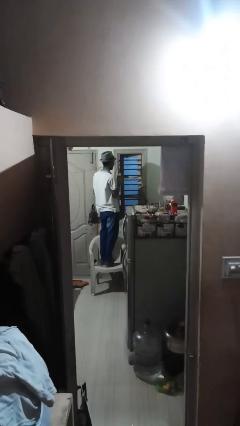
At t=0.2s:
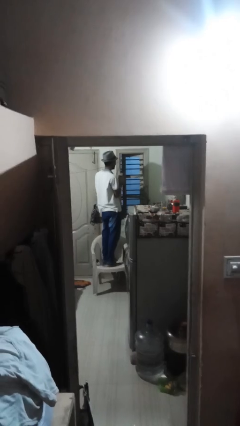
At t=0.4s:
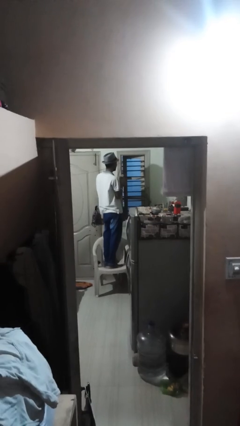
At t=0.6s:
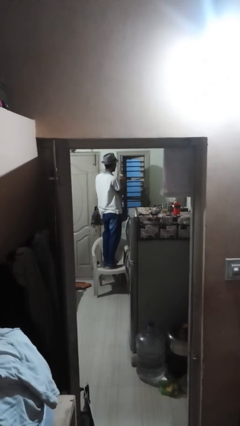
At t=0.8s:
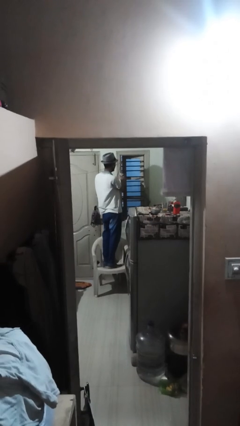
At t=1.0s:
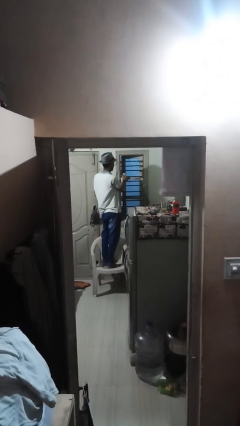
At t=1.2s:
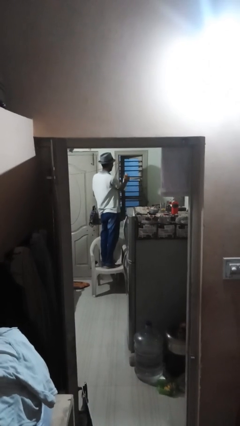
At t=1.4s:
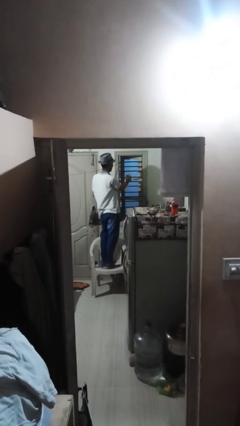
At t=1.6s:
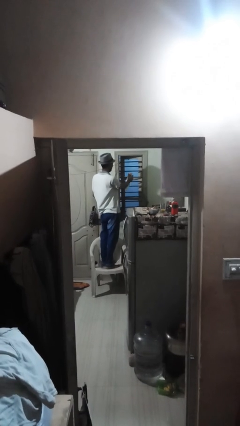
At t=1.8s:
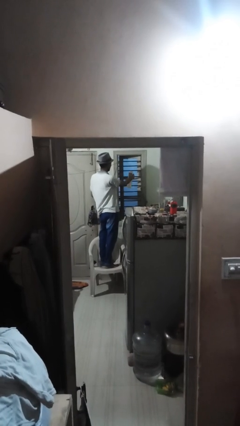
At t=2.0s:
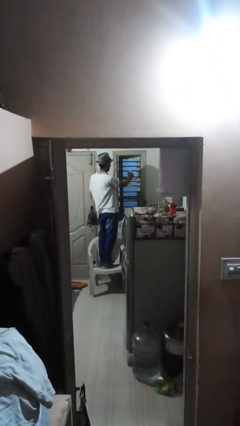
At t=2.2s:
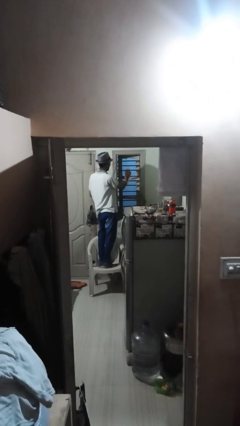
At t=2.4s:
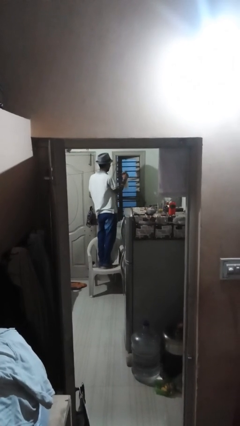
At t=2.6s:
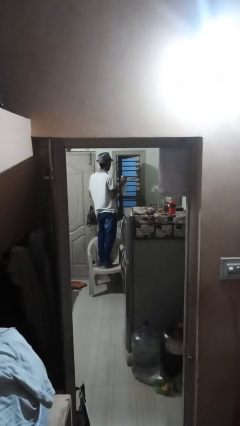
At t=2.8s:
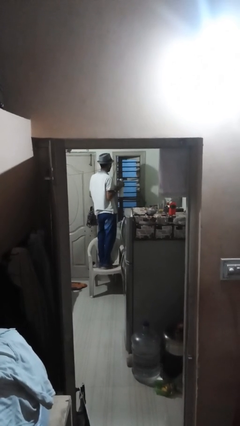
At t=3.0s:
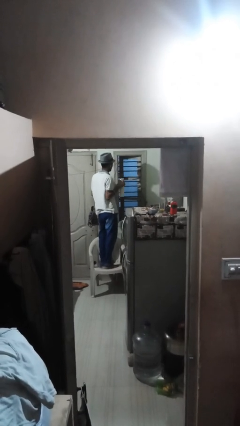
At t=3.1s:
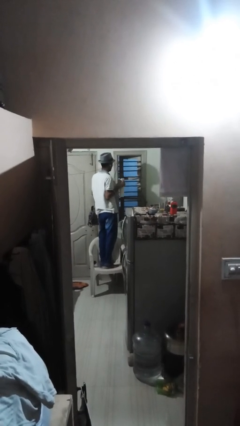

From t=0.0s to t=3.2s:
person sprays from bottle

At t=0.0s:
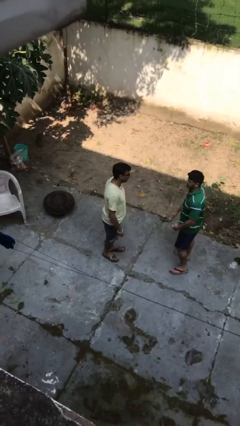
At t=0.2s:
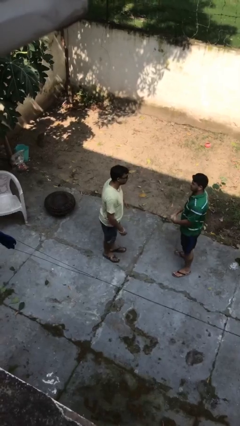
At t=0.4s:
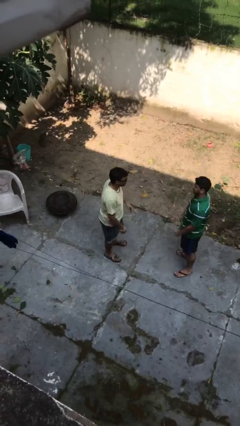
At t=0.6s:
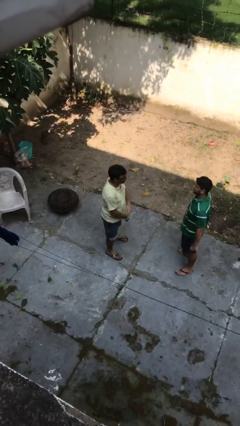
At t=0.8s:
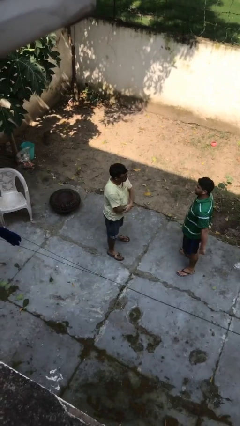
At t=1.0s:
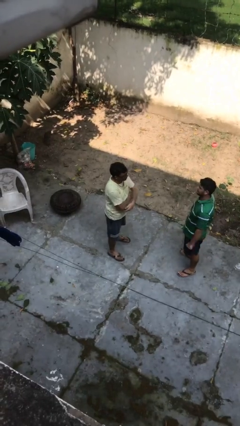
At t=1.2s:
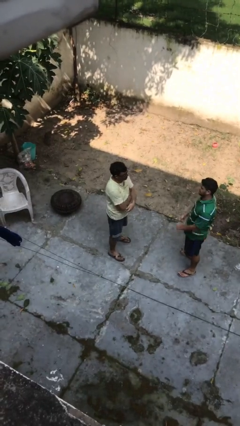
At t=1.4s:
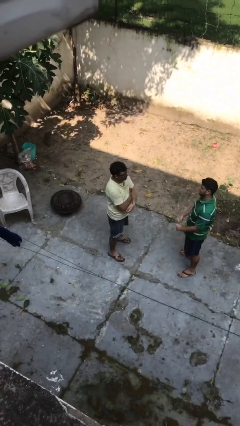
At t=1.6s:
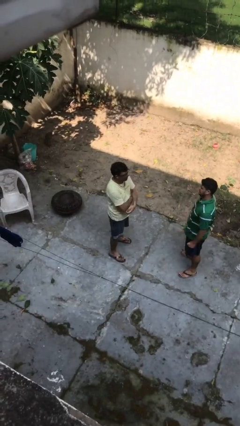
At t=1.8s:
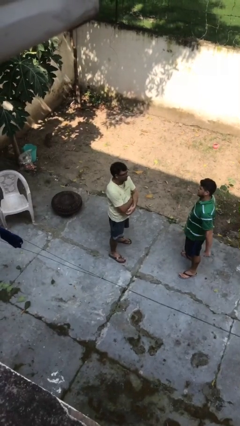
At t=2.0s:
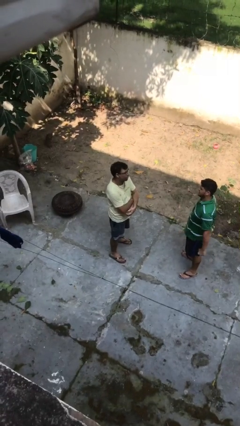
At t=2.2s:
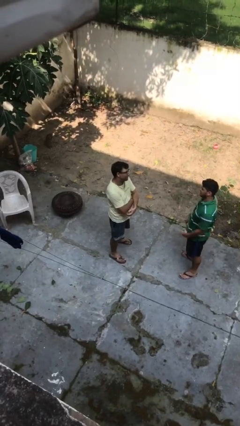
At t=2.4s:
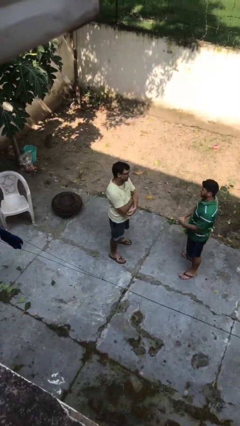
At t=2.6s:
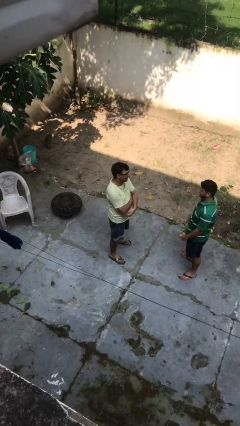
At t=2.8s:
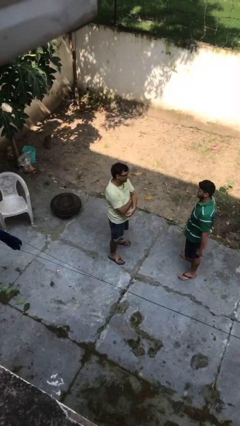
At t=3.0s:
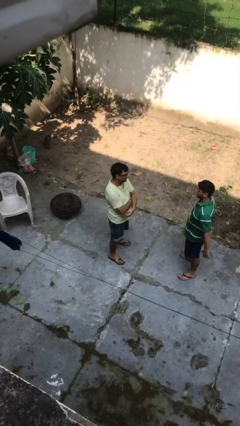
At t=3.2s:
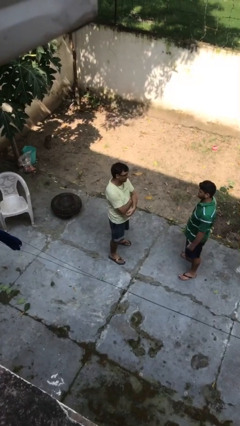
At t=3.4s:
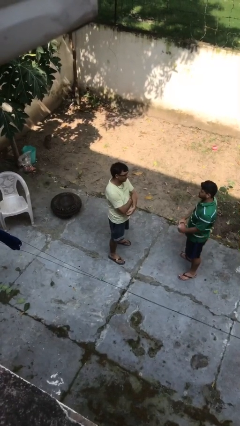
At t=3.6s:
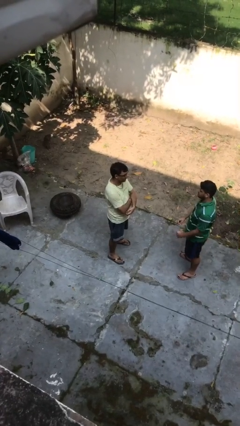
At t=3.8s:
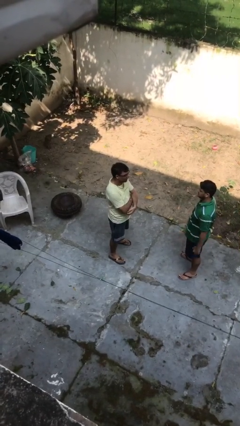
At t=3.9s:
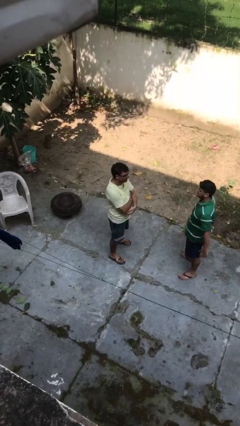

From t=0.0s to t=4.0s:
person talks to person

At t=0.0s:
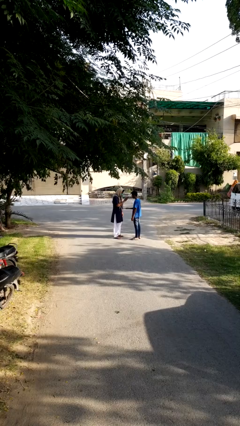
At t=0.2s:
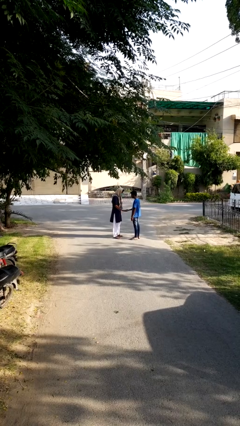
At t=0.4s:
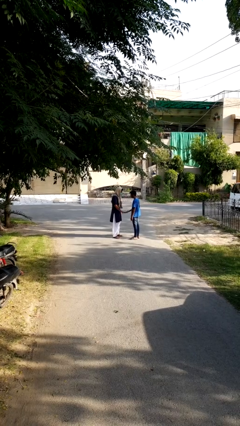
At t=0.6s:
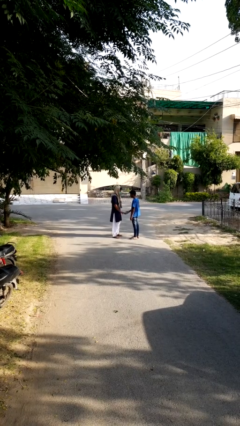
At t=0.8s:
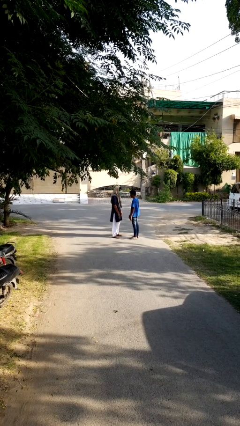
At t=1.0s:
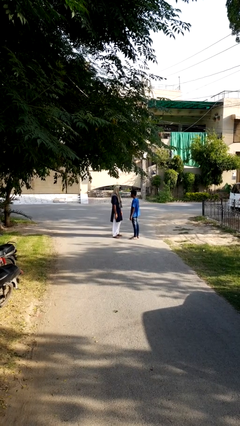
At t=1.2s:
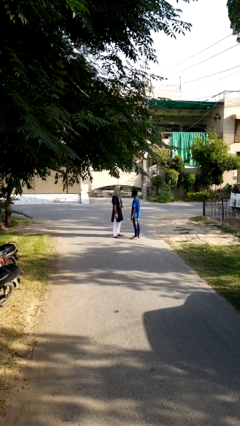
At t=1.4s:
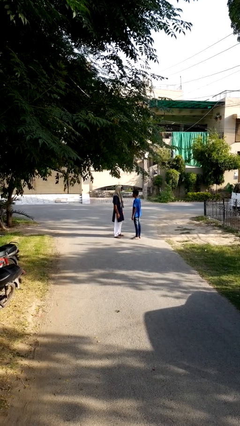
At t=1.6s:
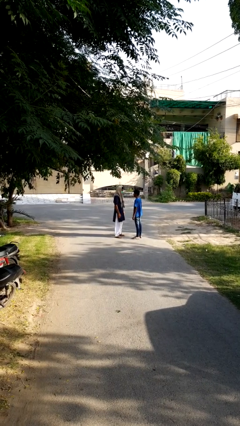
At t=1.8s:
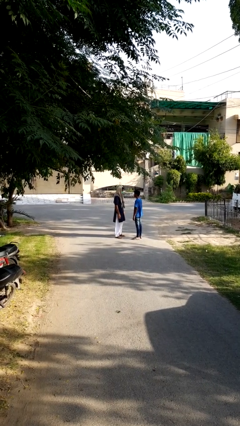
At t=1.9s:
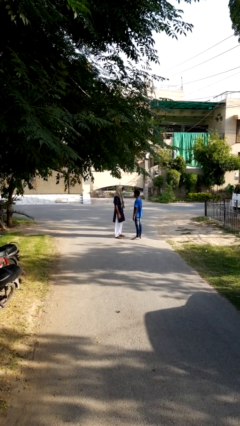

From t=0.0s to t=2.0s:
person highfives hand

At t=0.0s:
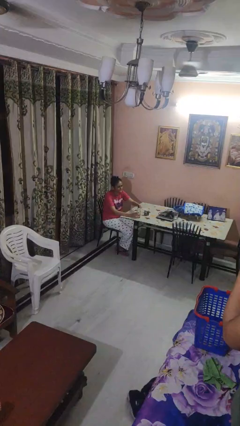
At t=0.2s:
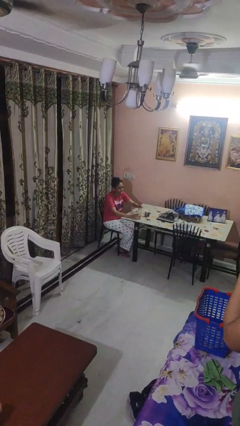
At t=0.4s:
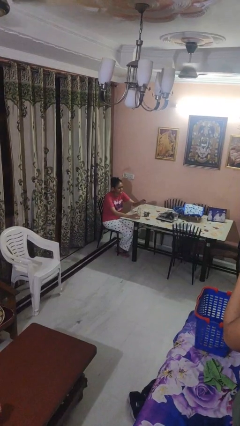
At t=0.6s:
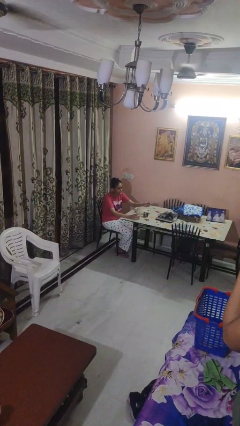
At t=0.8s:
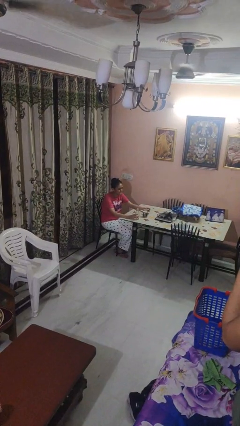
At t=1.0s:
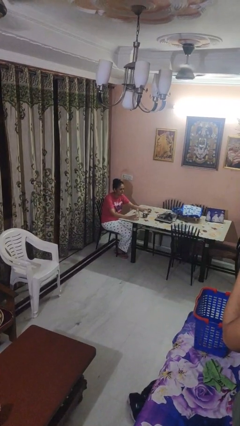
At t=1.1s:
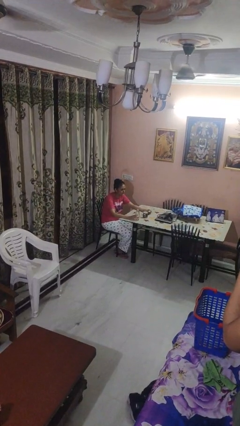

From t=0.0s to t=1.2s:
person unscrews lid from bottle

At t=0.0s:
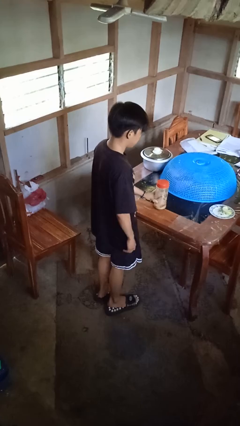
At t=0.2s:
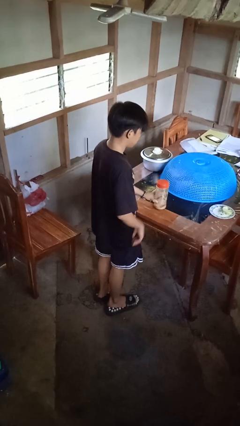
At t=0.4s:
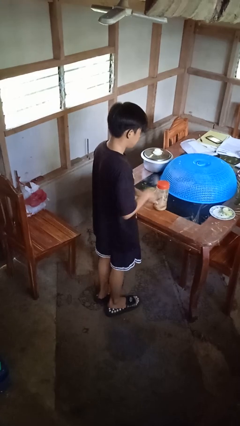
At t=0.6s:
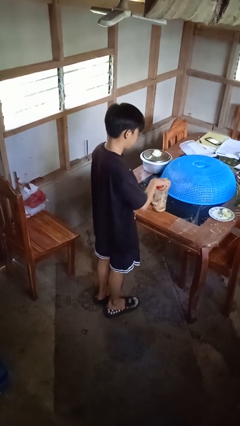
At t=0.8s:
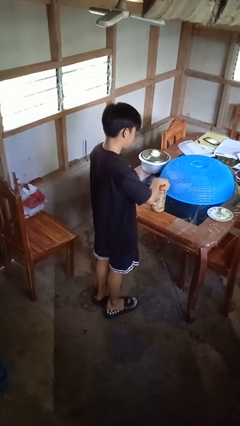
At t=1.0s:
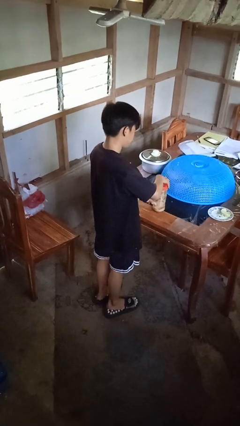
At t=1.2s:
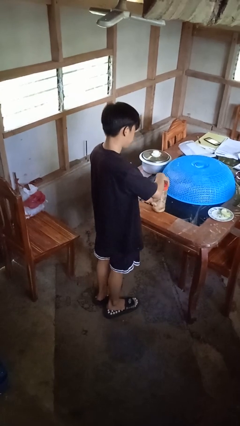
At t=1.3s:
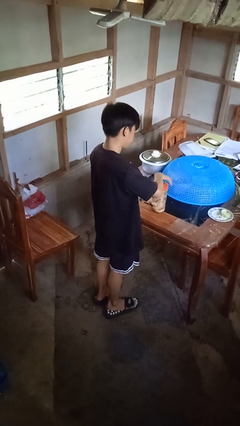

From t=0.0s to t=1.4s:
person opens jar

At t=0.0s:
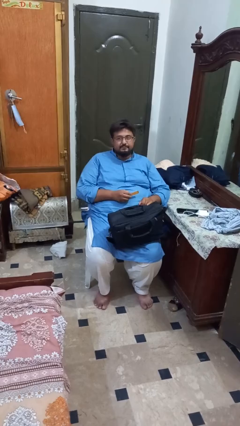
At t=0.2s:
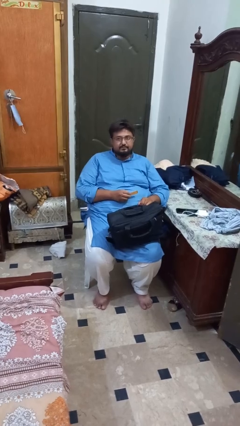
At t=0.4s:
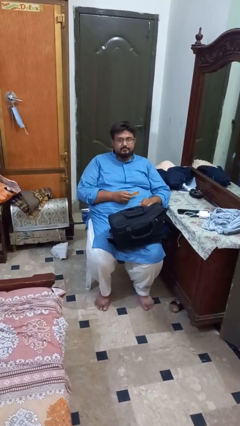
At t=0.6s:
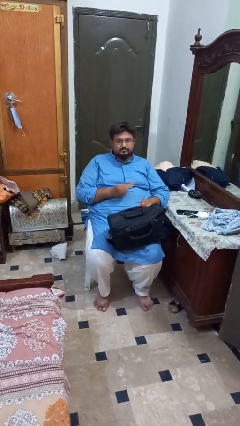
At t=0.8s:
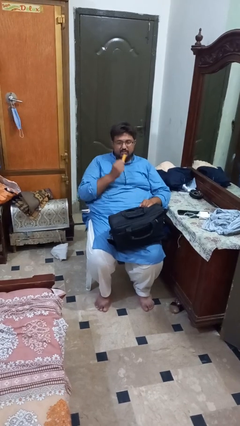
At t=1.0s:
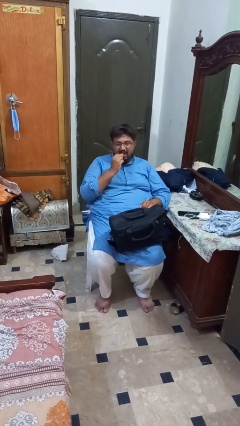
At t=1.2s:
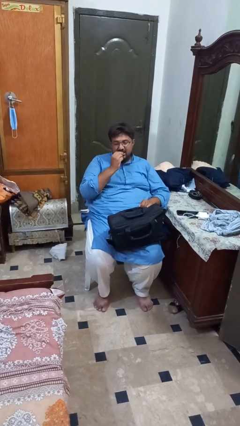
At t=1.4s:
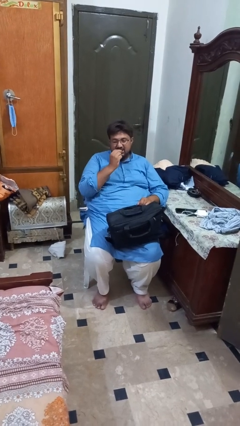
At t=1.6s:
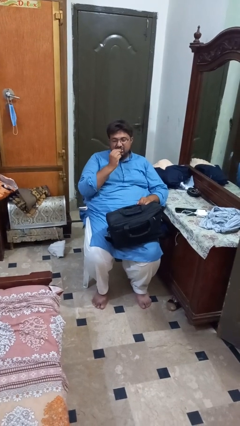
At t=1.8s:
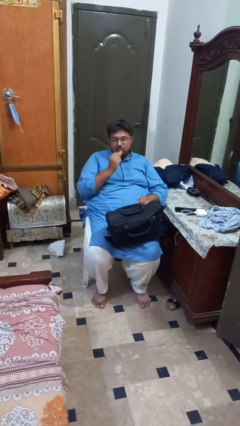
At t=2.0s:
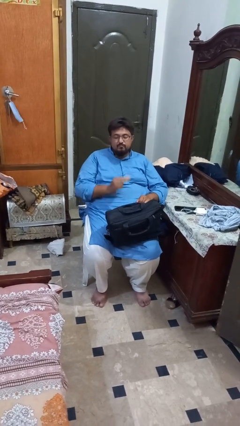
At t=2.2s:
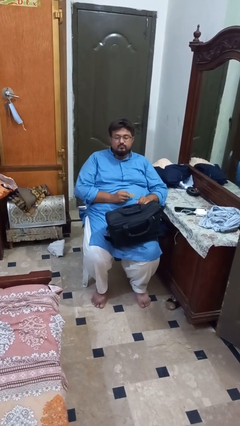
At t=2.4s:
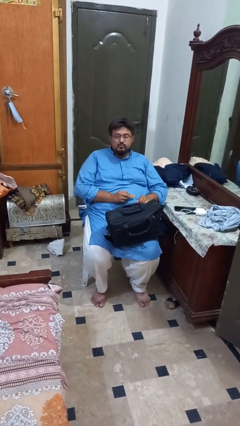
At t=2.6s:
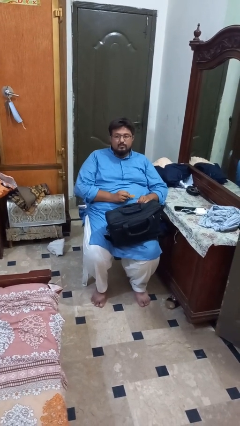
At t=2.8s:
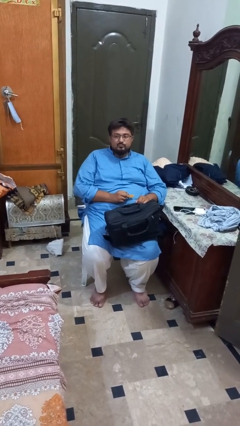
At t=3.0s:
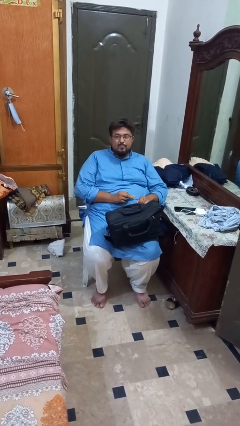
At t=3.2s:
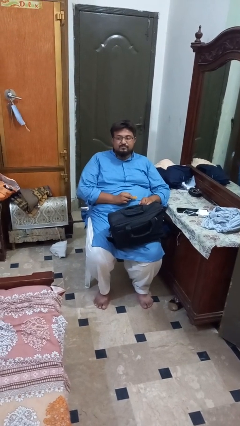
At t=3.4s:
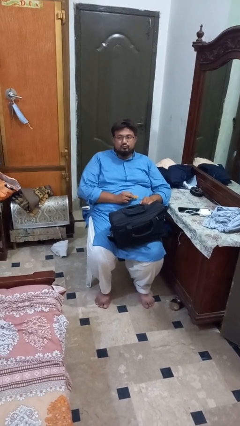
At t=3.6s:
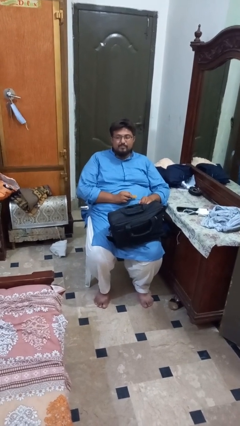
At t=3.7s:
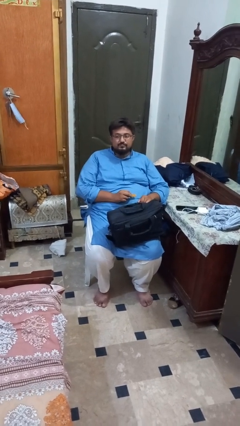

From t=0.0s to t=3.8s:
person eats snack from bag

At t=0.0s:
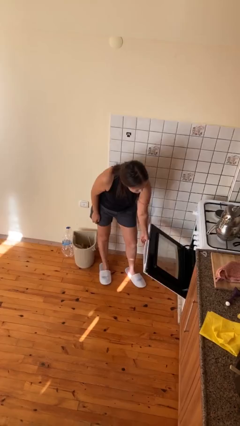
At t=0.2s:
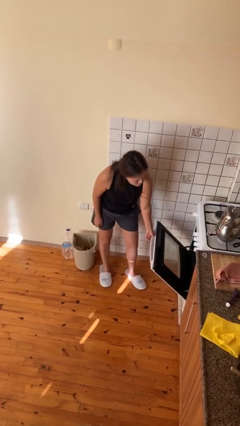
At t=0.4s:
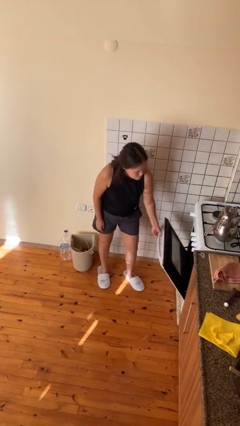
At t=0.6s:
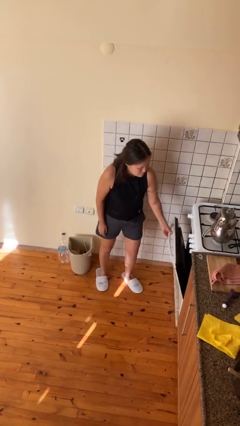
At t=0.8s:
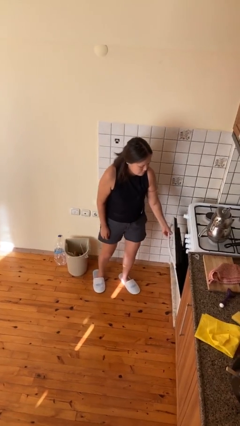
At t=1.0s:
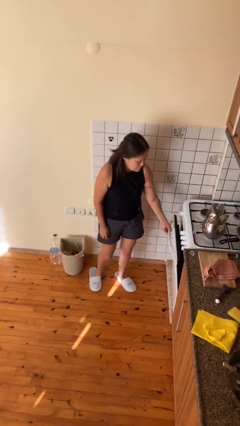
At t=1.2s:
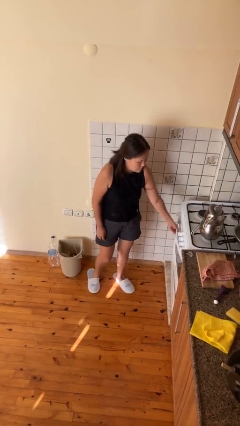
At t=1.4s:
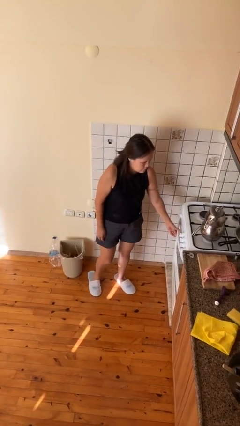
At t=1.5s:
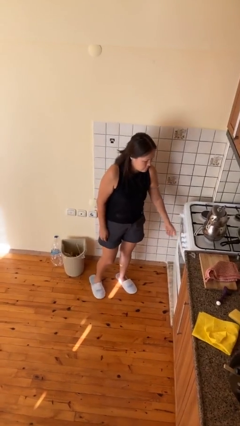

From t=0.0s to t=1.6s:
person closes oven door
